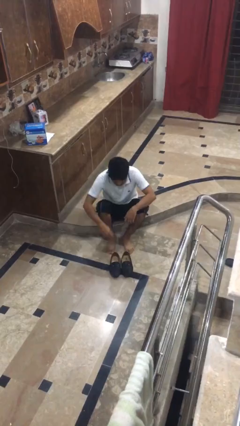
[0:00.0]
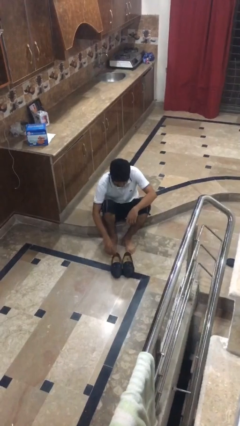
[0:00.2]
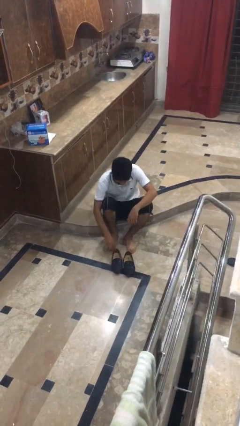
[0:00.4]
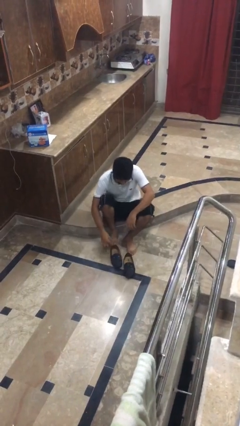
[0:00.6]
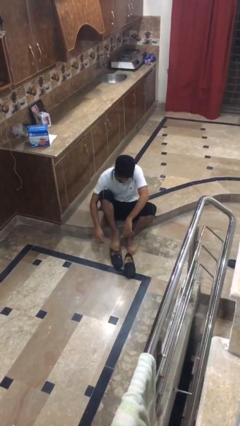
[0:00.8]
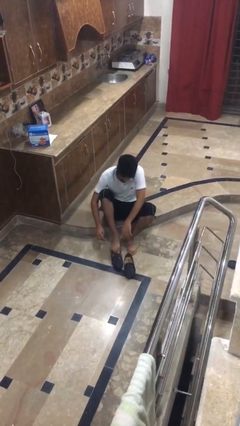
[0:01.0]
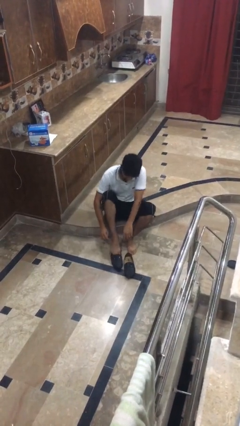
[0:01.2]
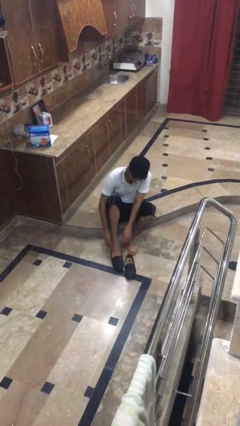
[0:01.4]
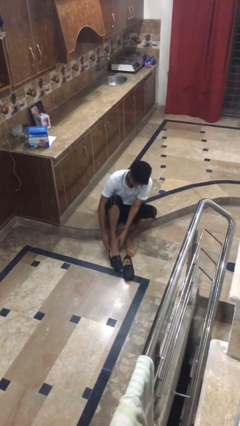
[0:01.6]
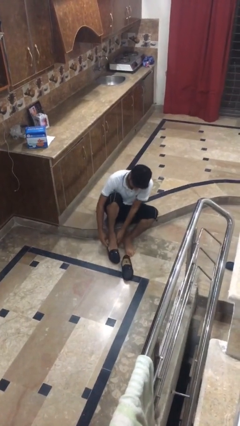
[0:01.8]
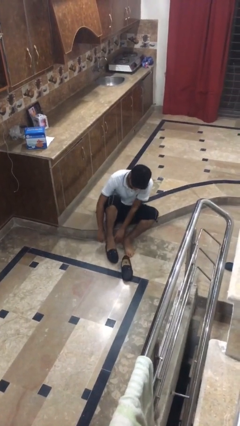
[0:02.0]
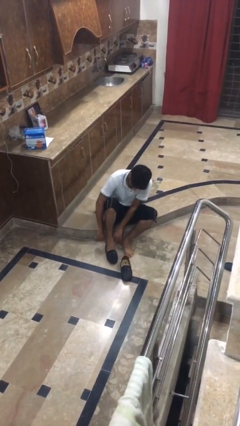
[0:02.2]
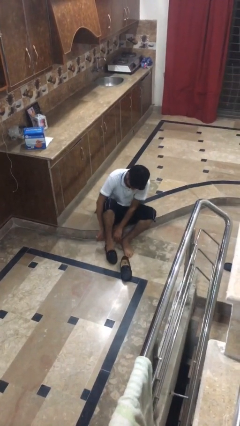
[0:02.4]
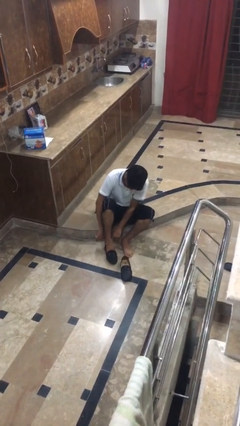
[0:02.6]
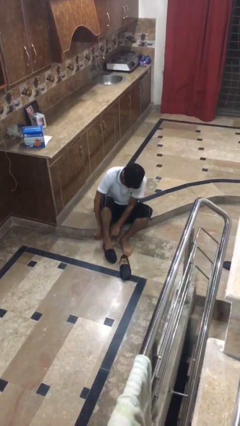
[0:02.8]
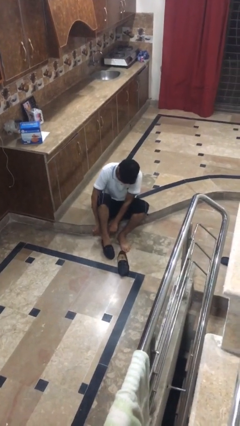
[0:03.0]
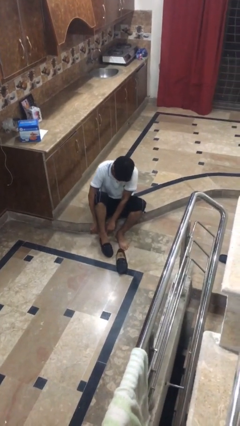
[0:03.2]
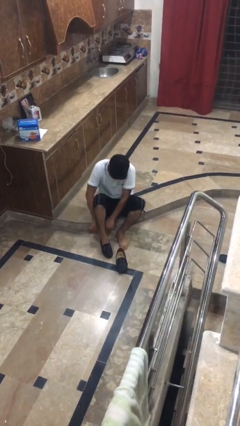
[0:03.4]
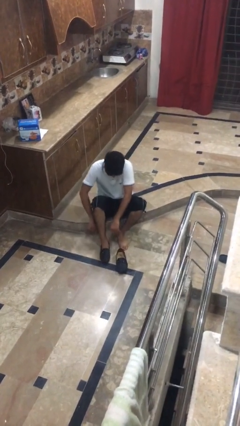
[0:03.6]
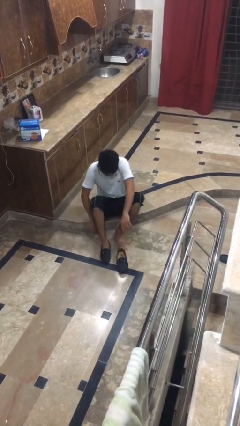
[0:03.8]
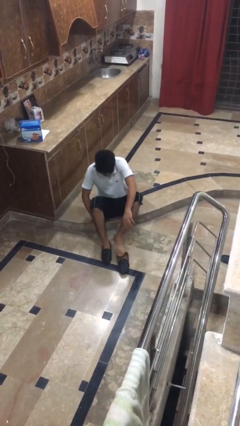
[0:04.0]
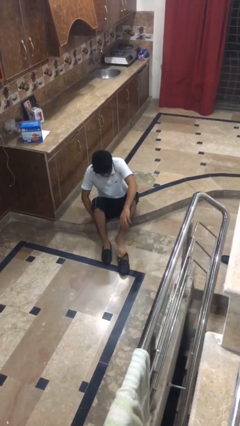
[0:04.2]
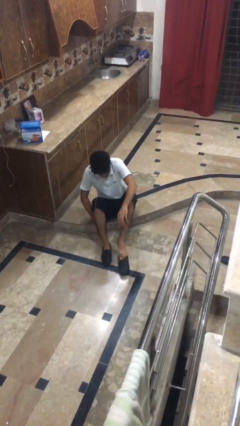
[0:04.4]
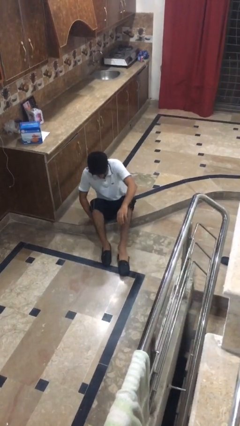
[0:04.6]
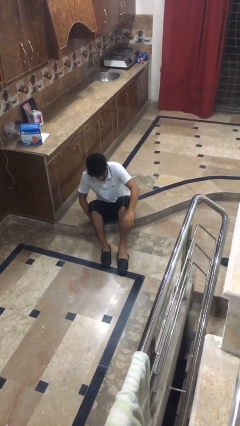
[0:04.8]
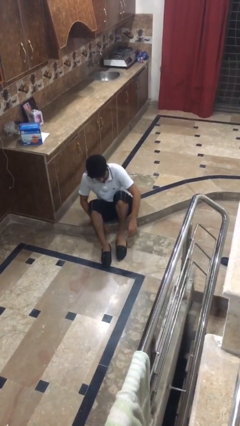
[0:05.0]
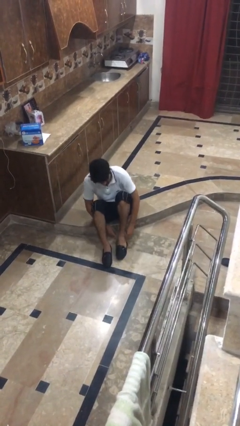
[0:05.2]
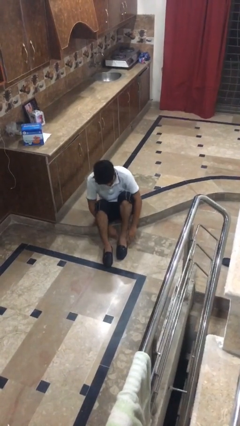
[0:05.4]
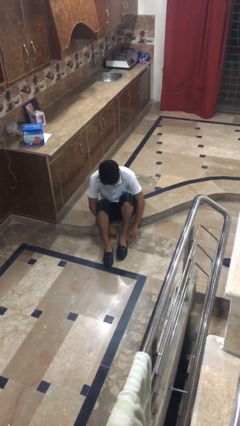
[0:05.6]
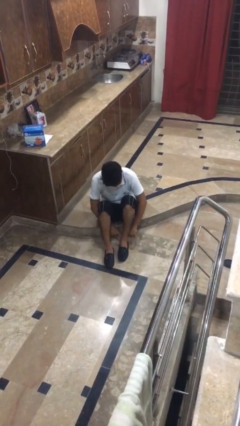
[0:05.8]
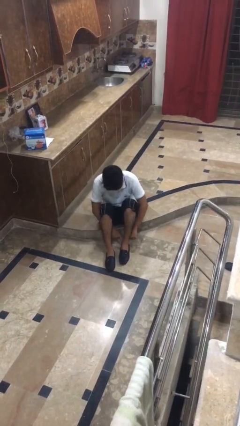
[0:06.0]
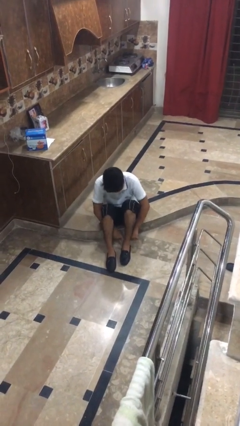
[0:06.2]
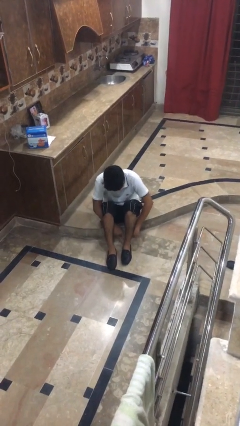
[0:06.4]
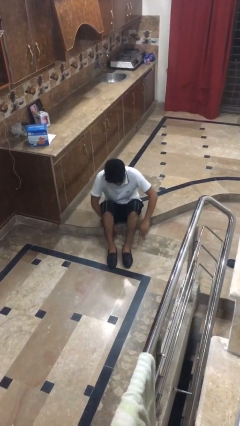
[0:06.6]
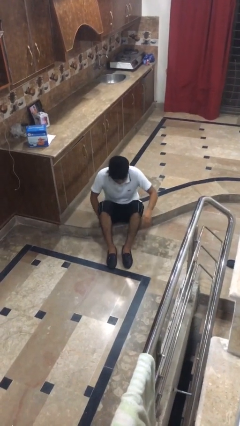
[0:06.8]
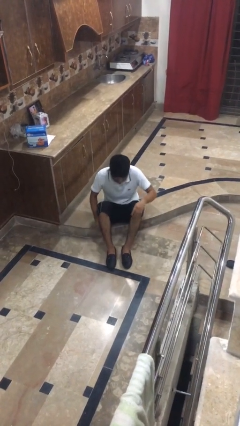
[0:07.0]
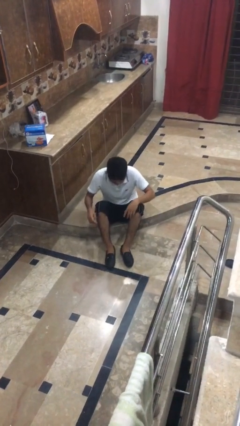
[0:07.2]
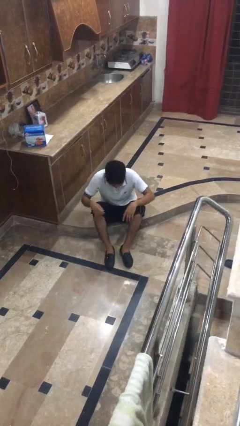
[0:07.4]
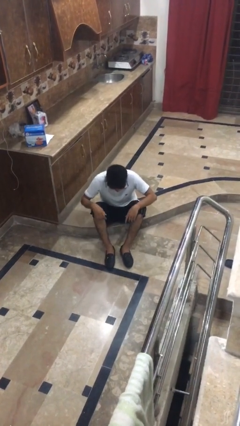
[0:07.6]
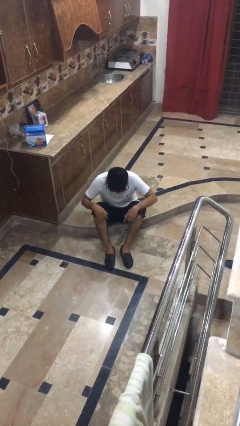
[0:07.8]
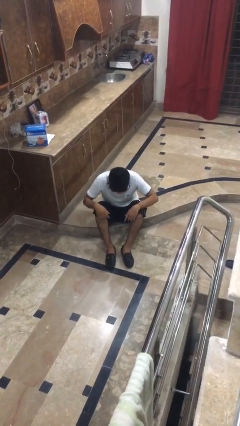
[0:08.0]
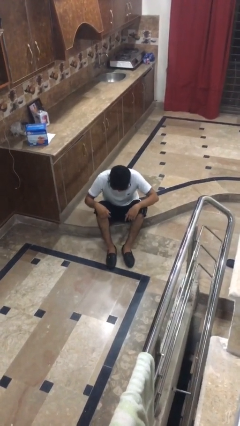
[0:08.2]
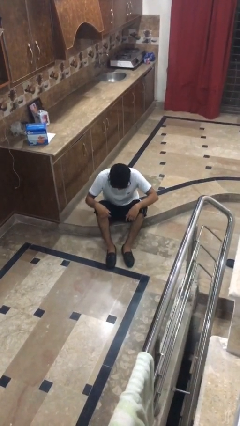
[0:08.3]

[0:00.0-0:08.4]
person puts on boots

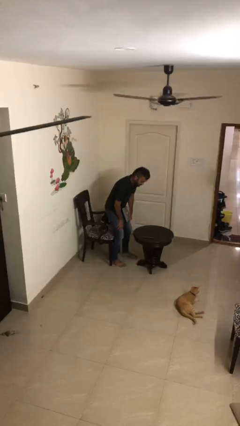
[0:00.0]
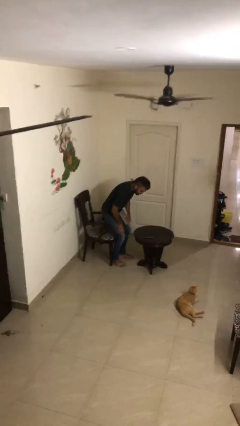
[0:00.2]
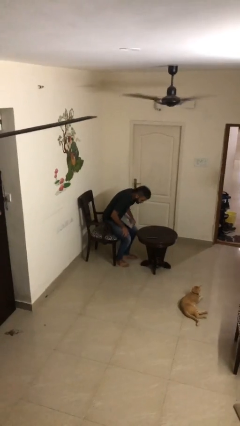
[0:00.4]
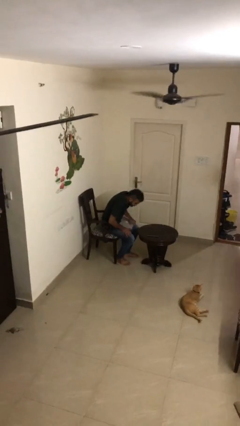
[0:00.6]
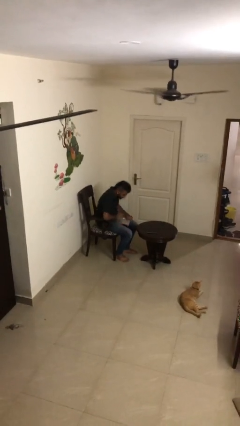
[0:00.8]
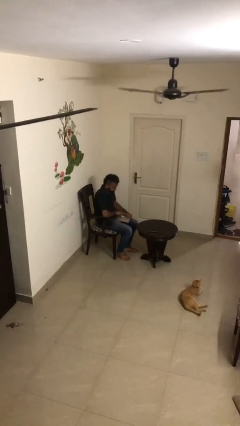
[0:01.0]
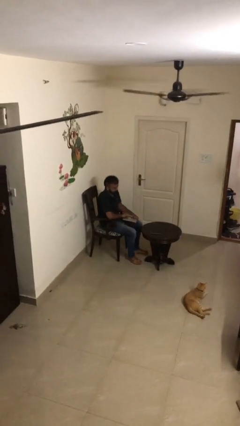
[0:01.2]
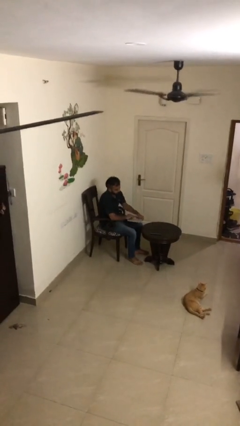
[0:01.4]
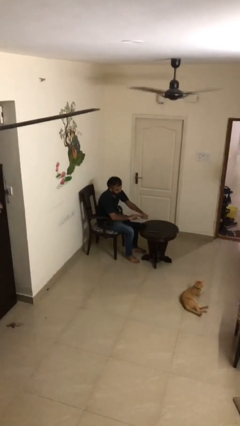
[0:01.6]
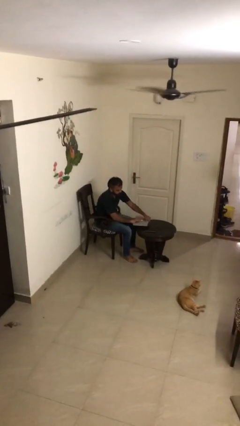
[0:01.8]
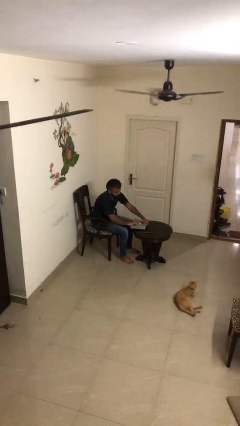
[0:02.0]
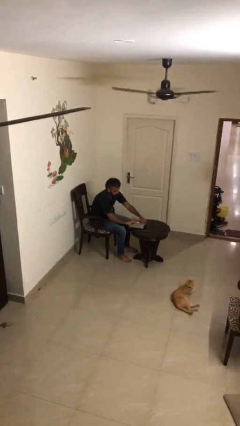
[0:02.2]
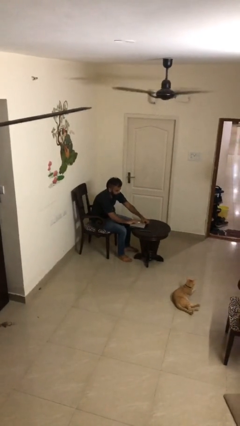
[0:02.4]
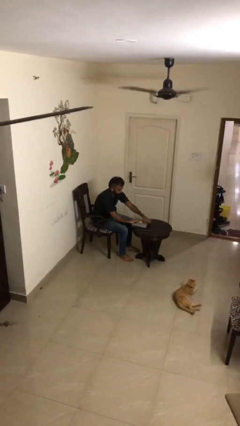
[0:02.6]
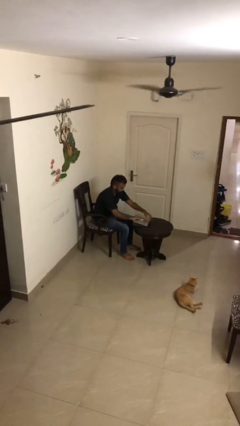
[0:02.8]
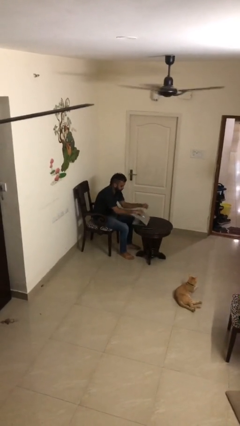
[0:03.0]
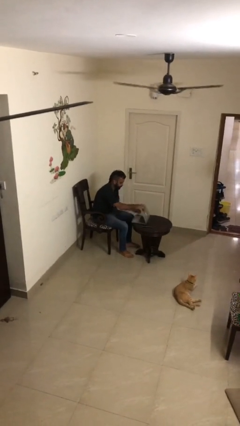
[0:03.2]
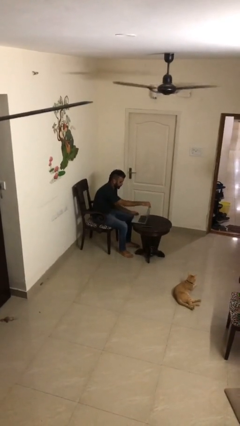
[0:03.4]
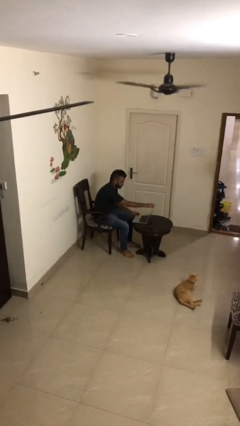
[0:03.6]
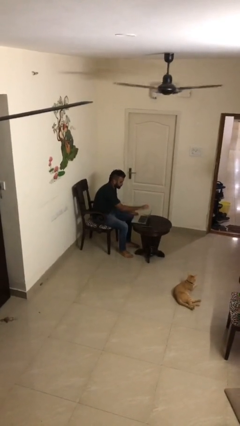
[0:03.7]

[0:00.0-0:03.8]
person sits down

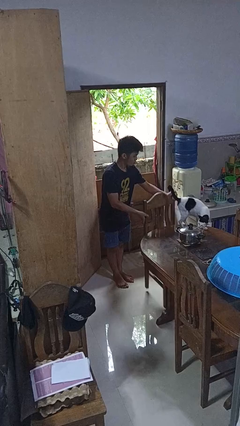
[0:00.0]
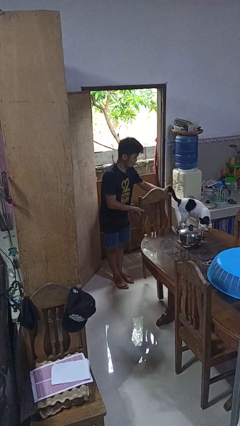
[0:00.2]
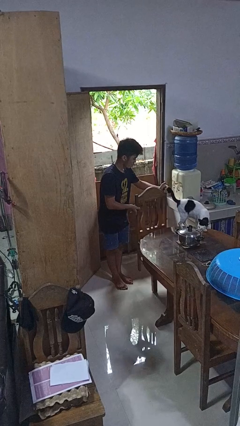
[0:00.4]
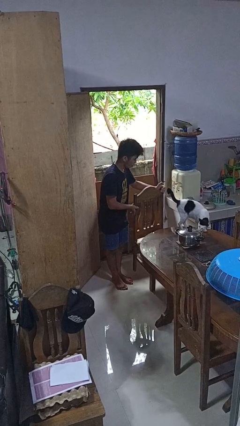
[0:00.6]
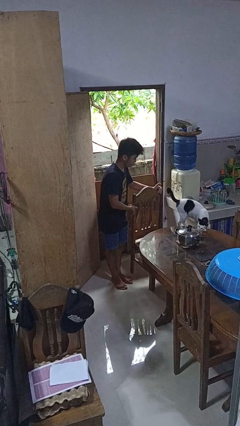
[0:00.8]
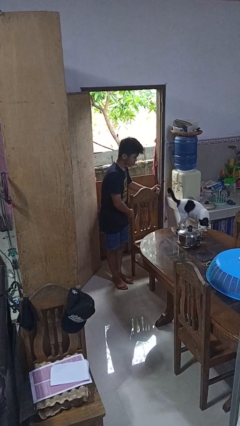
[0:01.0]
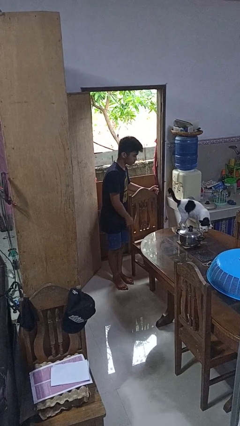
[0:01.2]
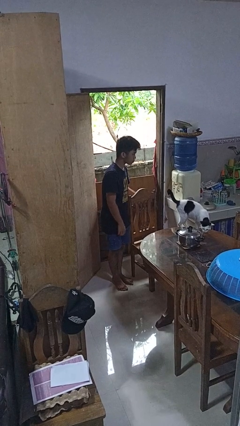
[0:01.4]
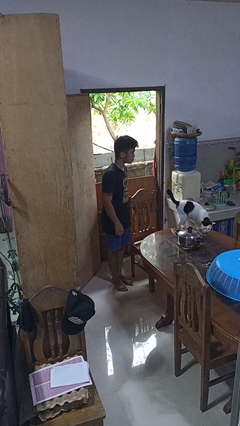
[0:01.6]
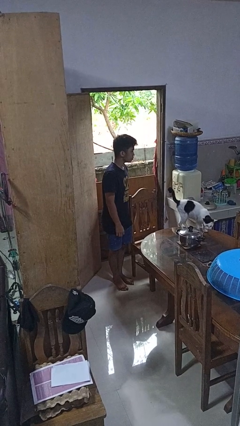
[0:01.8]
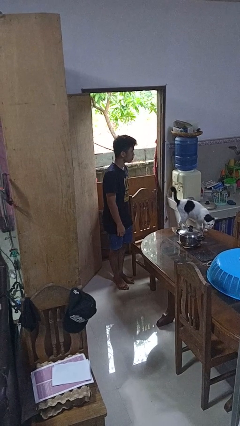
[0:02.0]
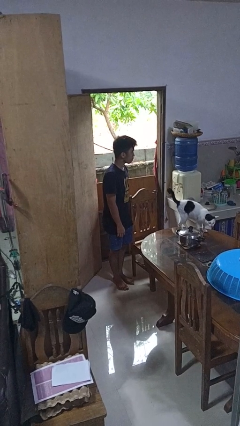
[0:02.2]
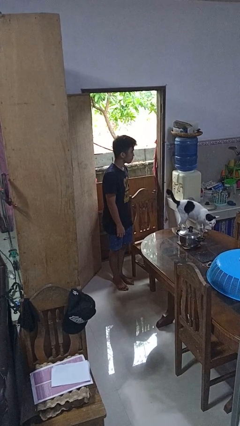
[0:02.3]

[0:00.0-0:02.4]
person pulls out chair

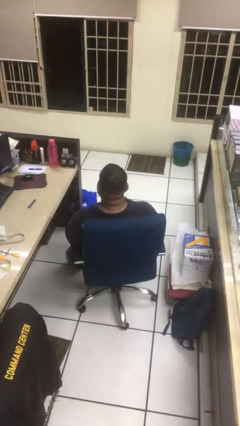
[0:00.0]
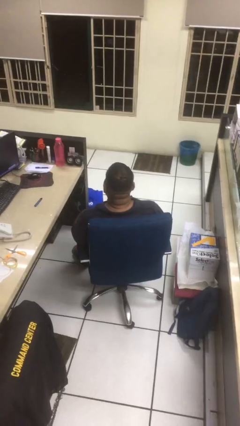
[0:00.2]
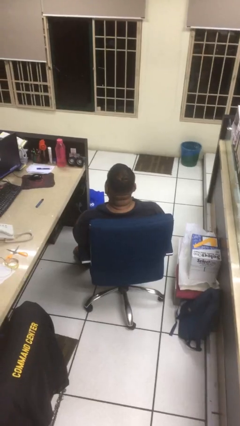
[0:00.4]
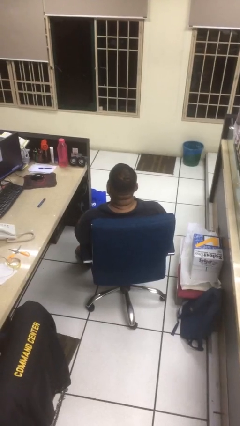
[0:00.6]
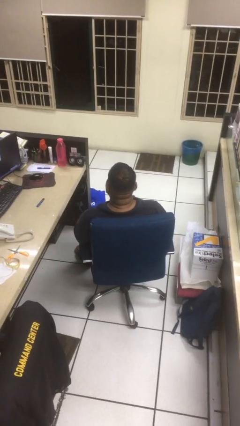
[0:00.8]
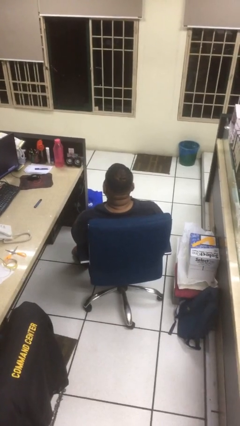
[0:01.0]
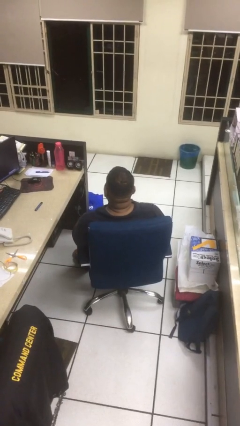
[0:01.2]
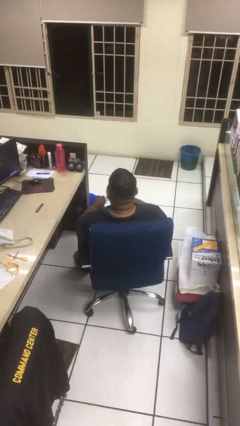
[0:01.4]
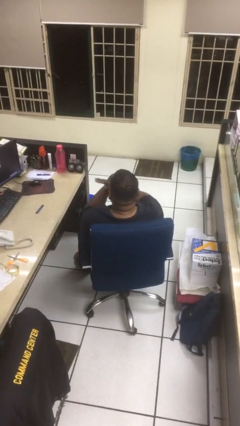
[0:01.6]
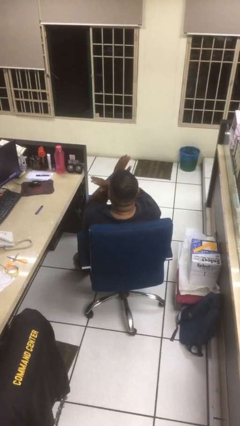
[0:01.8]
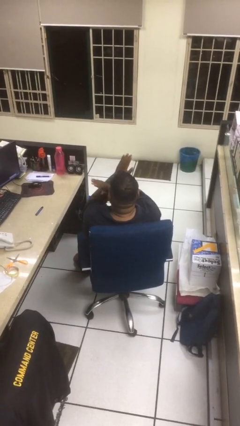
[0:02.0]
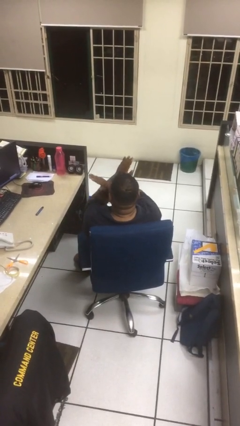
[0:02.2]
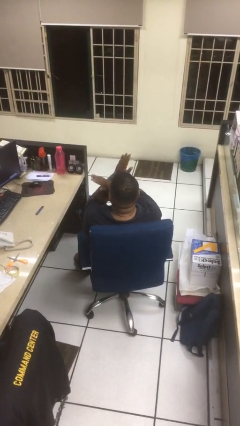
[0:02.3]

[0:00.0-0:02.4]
person gestures arms x

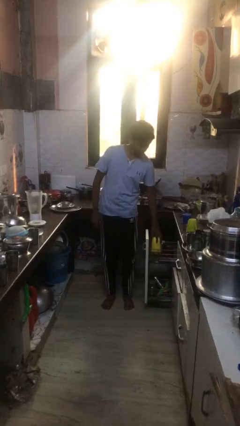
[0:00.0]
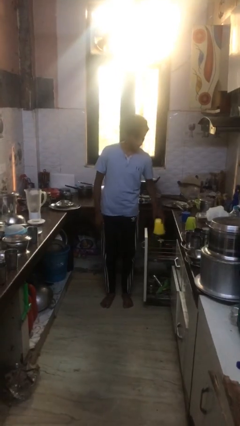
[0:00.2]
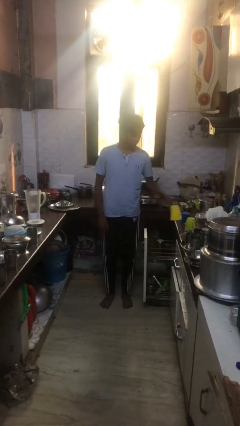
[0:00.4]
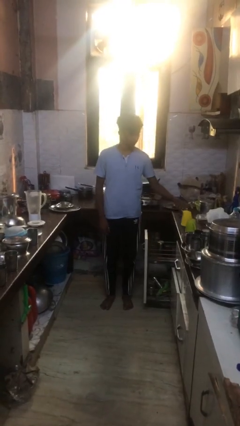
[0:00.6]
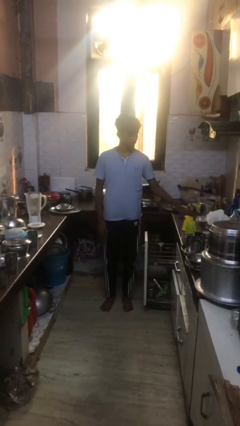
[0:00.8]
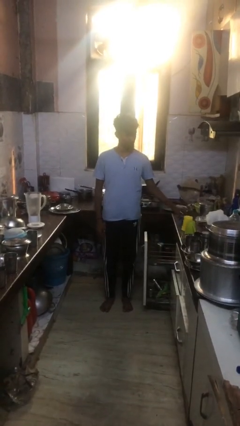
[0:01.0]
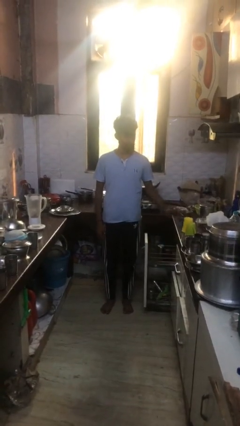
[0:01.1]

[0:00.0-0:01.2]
person unloads dishwasher
